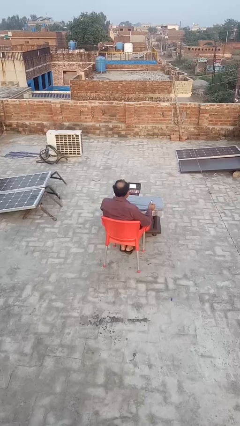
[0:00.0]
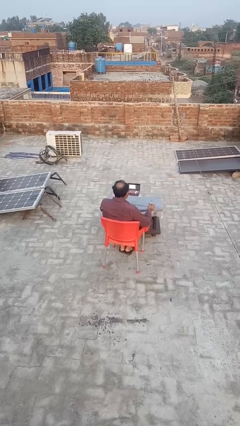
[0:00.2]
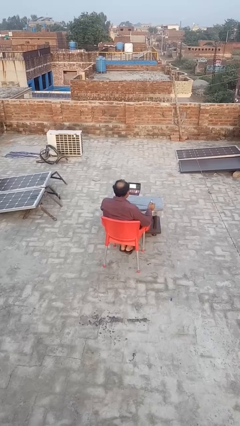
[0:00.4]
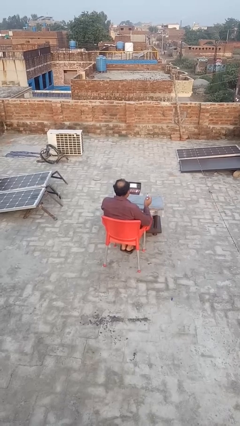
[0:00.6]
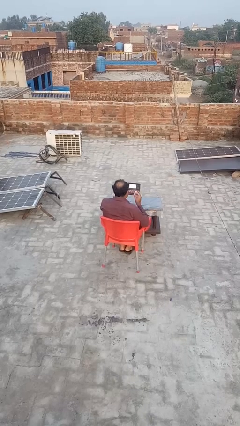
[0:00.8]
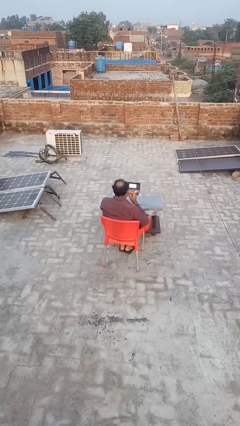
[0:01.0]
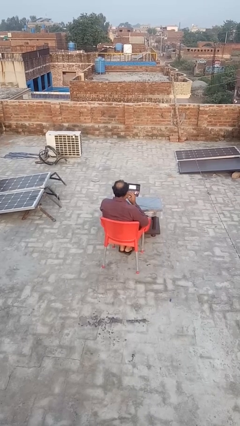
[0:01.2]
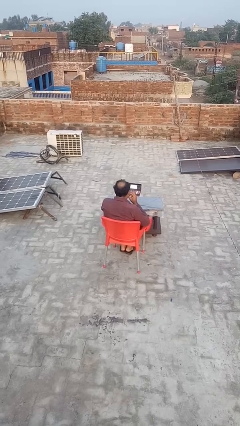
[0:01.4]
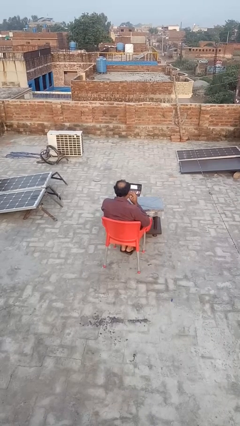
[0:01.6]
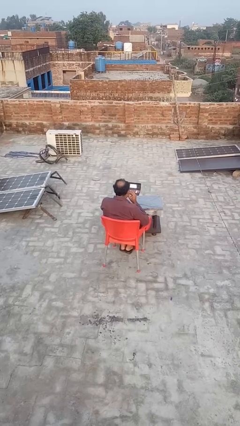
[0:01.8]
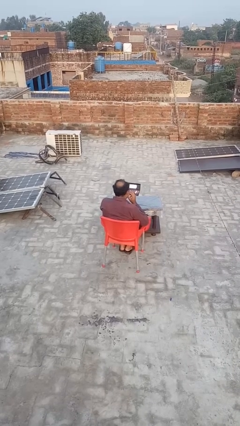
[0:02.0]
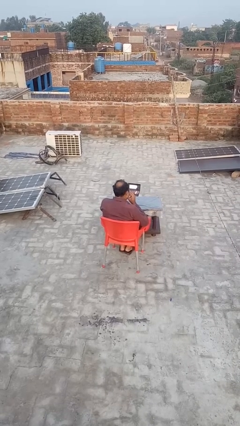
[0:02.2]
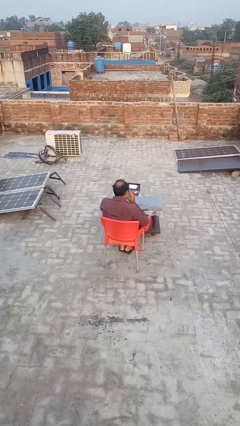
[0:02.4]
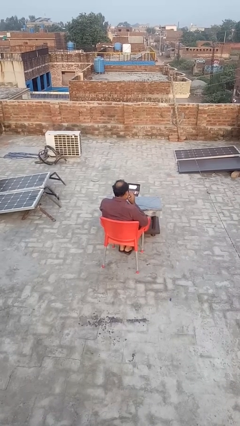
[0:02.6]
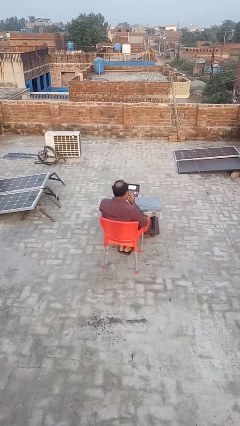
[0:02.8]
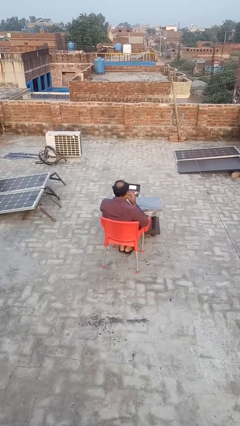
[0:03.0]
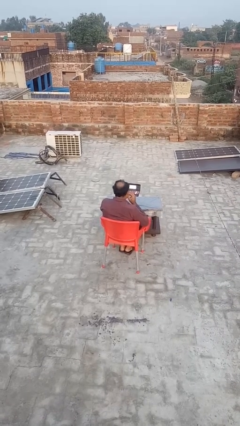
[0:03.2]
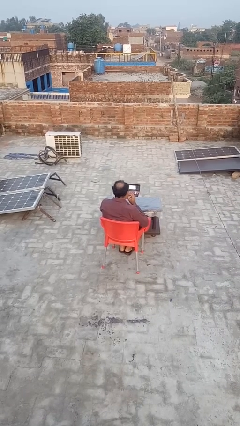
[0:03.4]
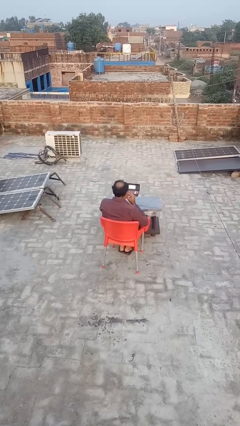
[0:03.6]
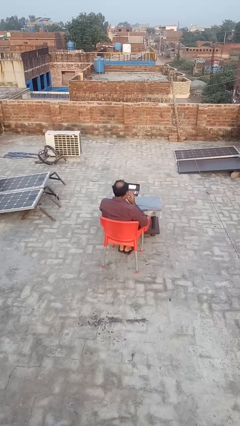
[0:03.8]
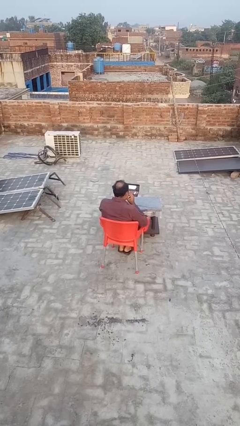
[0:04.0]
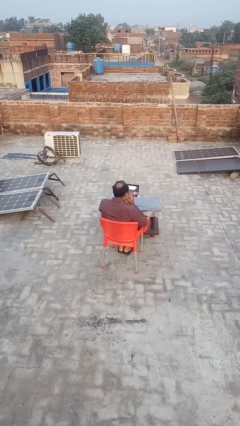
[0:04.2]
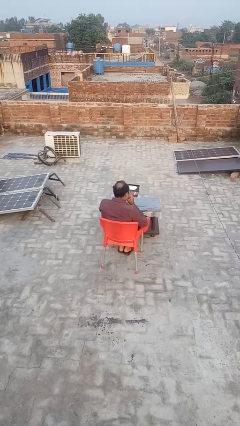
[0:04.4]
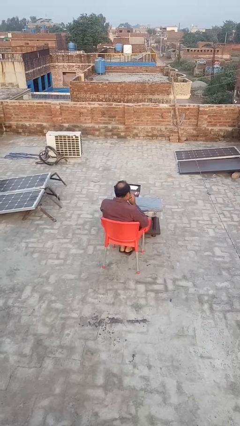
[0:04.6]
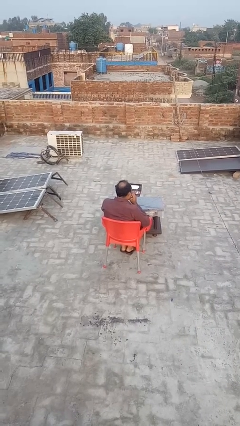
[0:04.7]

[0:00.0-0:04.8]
person applies lip makeup

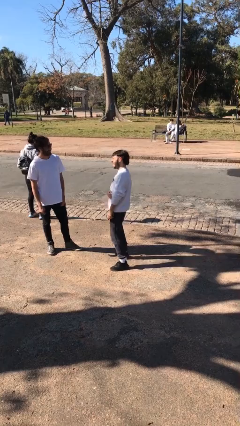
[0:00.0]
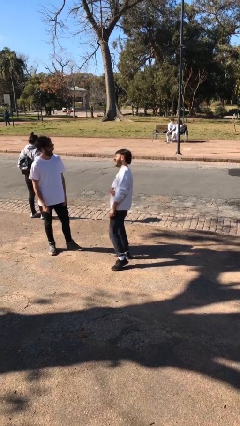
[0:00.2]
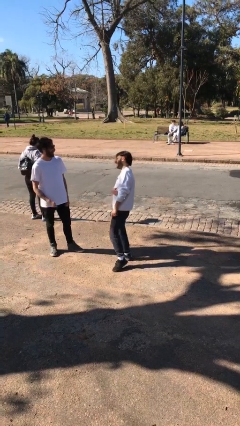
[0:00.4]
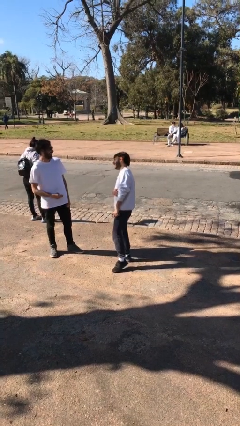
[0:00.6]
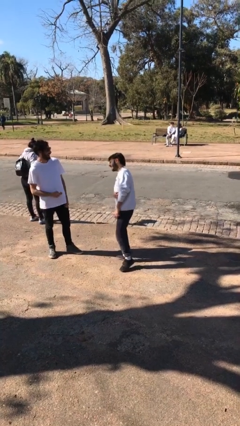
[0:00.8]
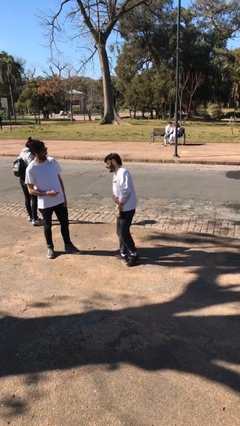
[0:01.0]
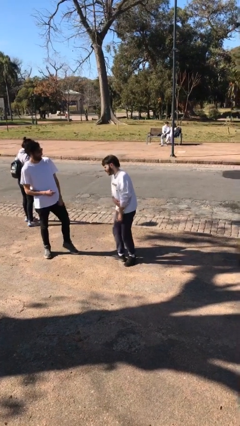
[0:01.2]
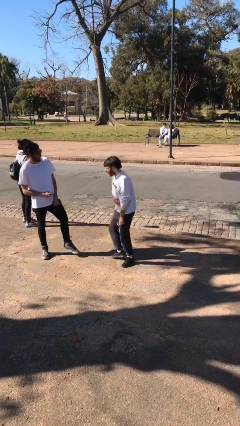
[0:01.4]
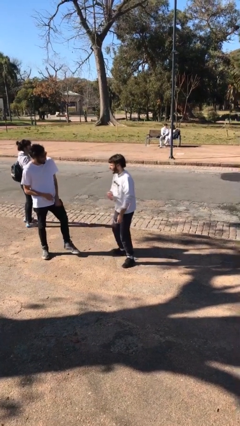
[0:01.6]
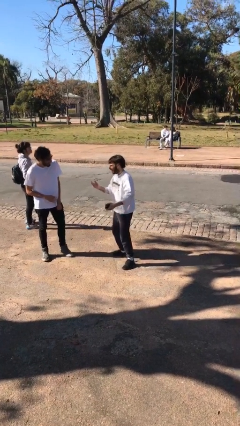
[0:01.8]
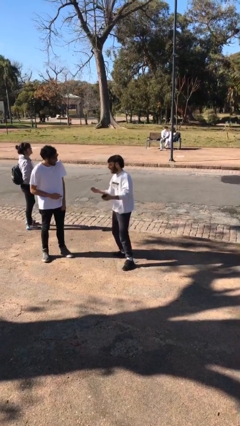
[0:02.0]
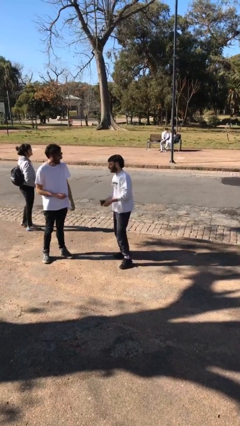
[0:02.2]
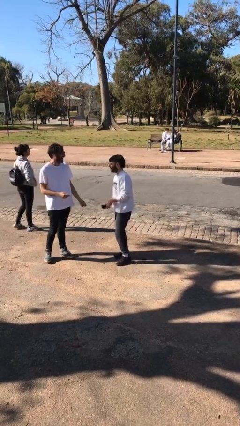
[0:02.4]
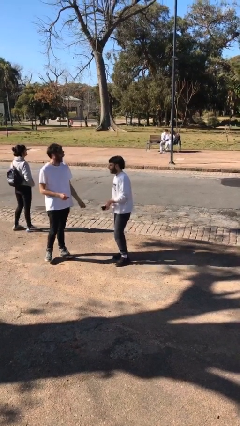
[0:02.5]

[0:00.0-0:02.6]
person laughs with person

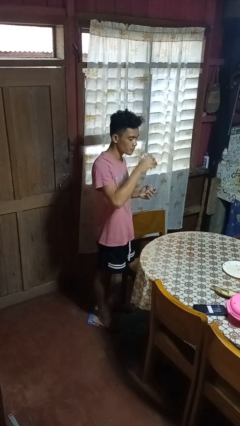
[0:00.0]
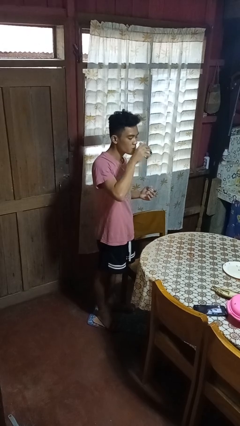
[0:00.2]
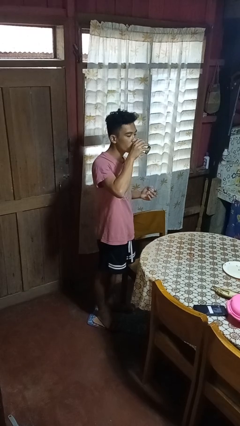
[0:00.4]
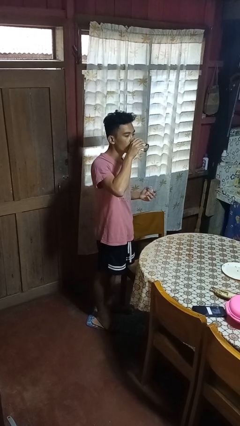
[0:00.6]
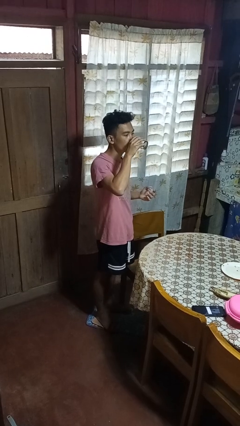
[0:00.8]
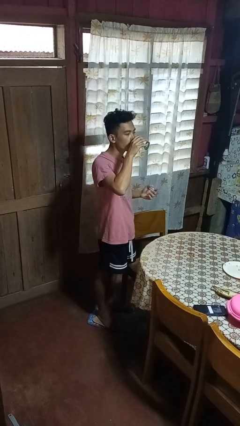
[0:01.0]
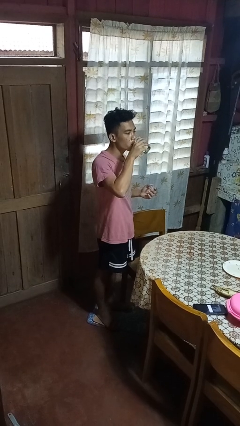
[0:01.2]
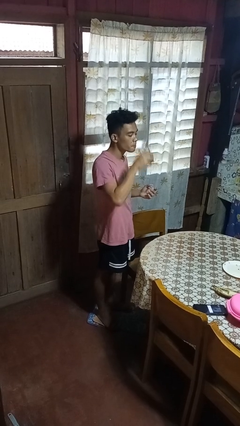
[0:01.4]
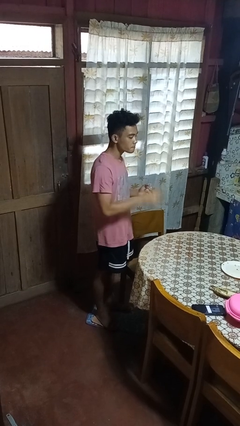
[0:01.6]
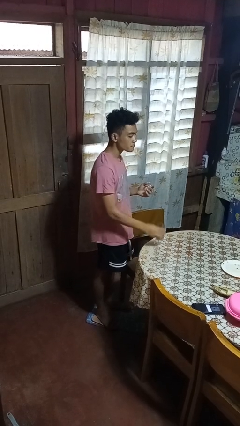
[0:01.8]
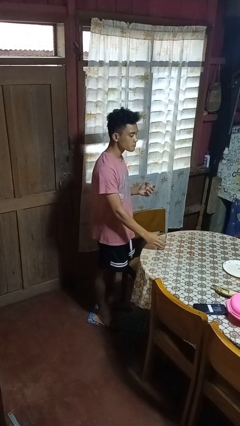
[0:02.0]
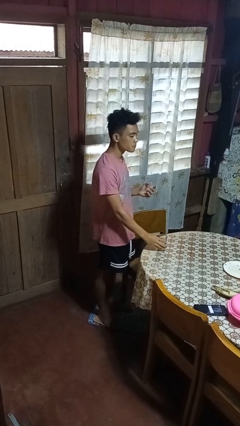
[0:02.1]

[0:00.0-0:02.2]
person drinks from cup

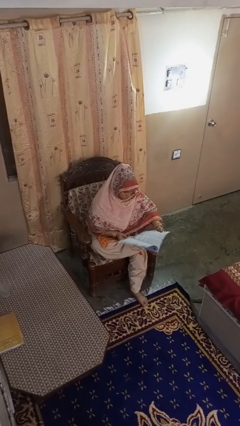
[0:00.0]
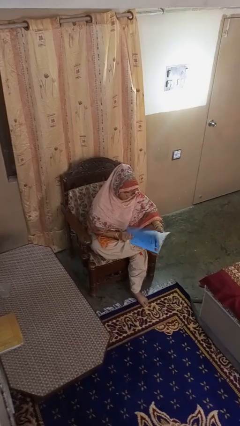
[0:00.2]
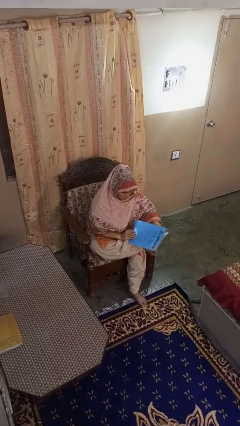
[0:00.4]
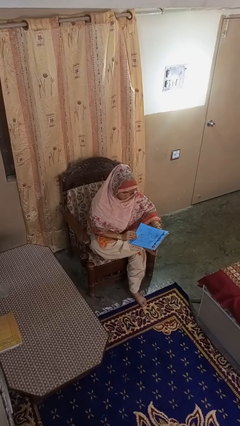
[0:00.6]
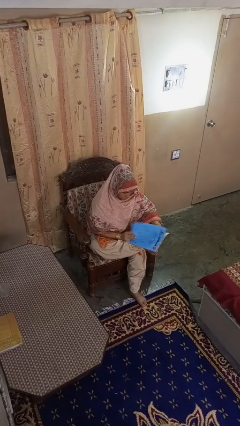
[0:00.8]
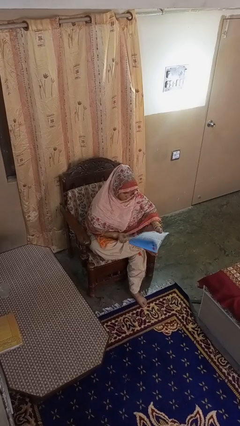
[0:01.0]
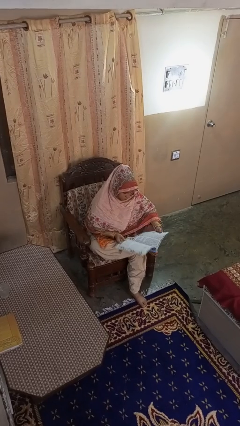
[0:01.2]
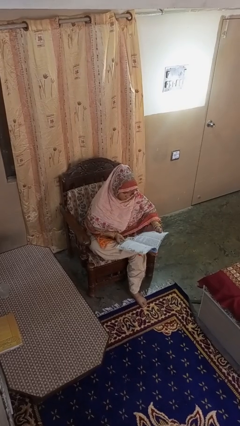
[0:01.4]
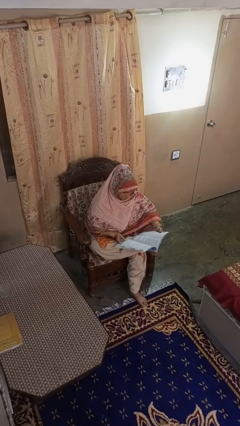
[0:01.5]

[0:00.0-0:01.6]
person reads magazine

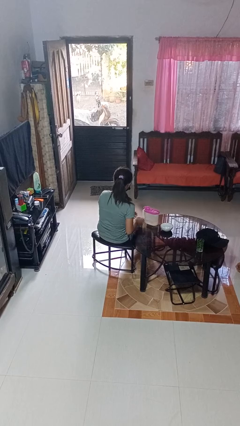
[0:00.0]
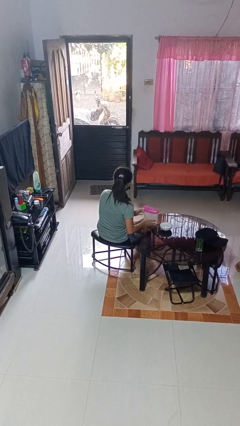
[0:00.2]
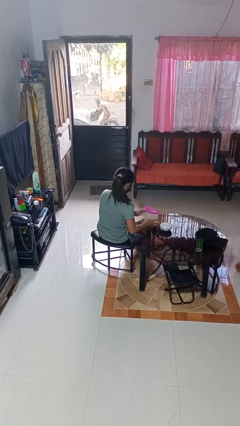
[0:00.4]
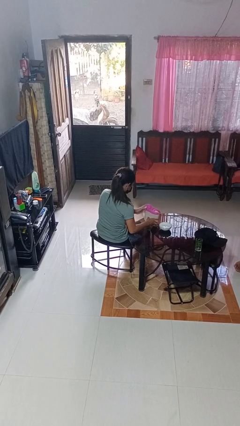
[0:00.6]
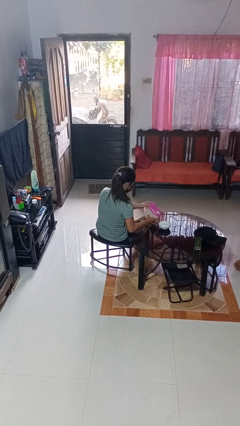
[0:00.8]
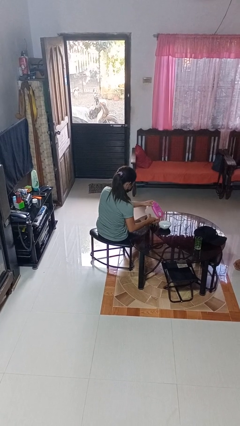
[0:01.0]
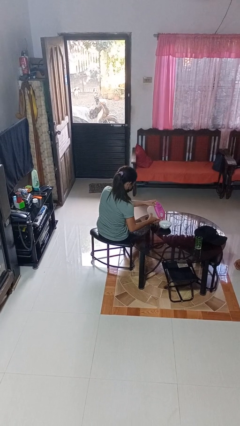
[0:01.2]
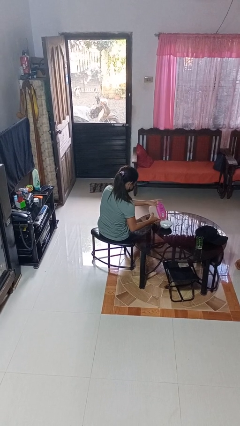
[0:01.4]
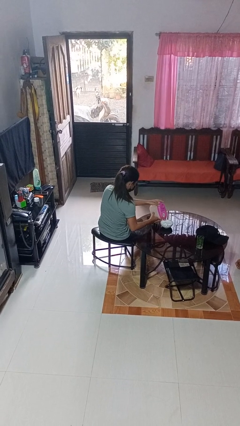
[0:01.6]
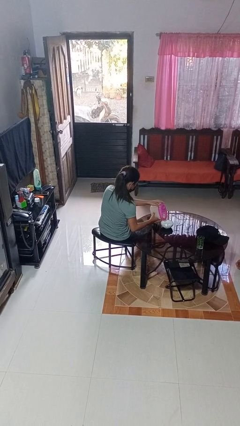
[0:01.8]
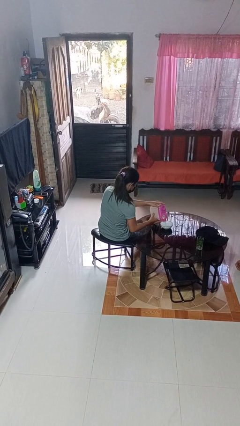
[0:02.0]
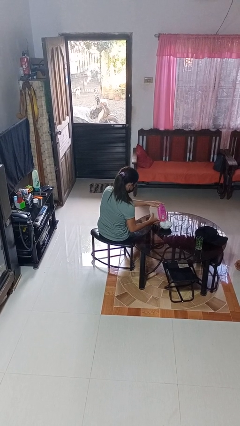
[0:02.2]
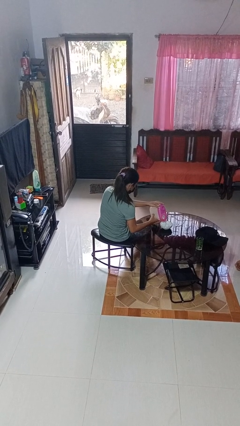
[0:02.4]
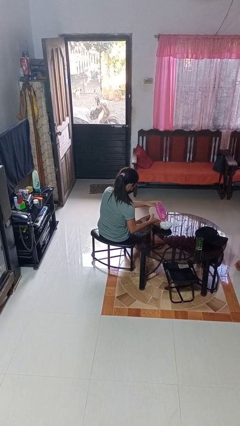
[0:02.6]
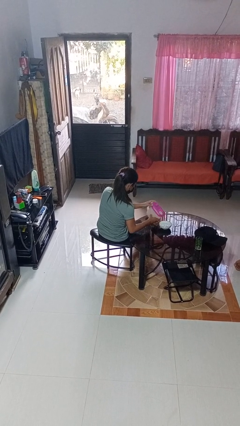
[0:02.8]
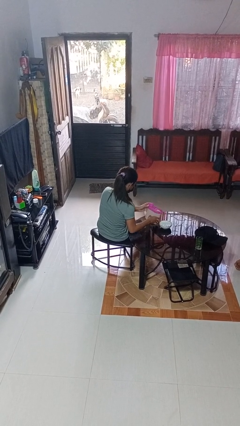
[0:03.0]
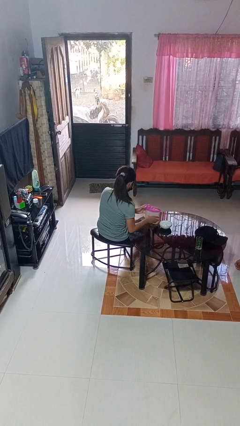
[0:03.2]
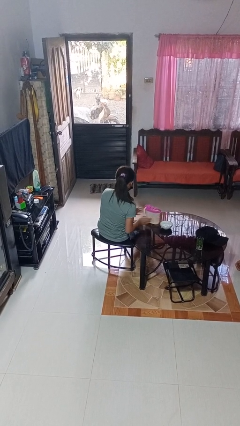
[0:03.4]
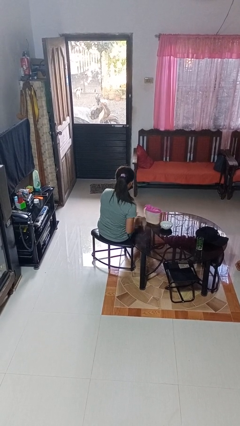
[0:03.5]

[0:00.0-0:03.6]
person pours into bowl

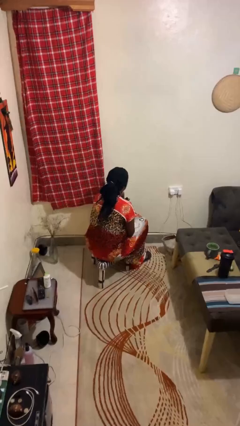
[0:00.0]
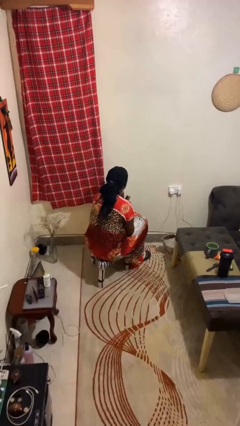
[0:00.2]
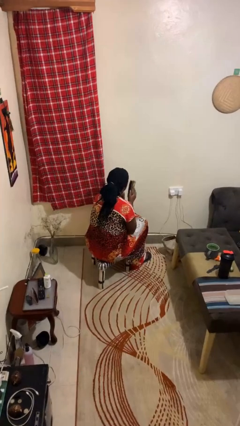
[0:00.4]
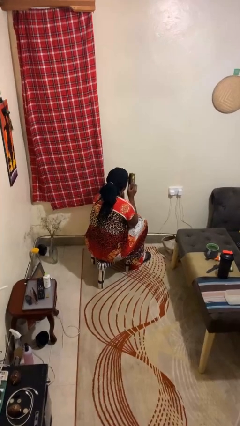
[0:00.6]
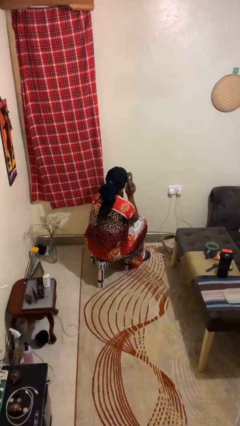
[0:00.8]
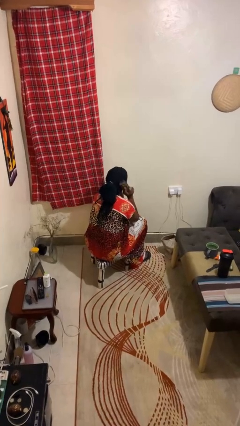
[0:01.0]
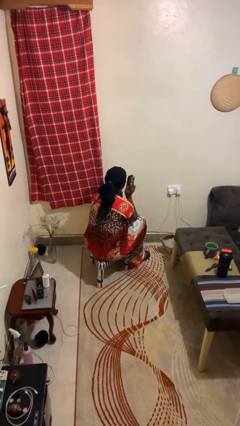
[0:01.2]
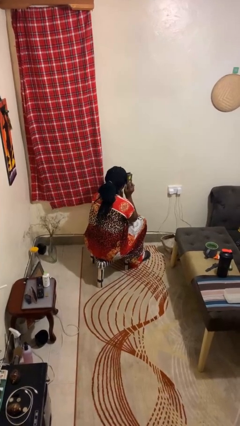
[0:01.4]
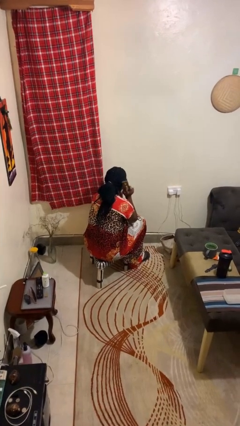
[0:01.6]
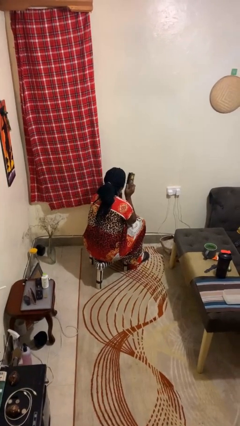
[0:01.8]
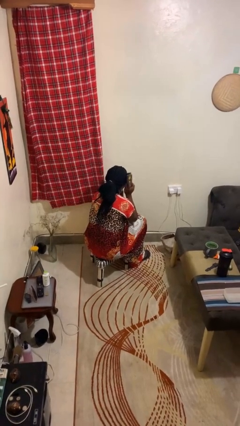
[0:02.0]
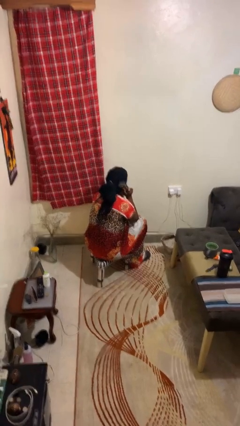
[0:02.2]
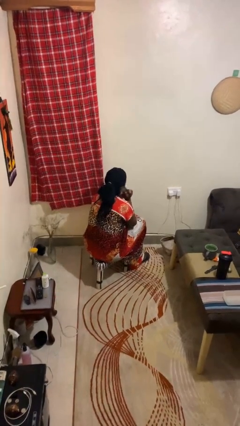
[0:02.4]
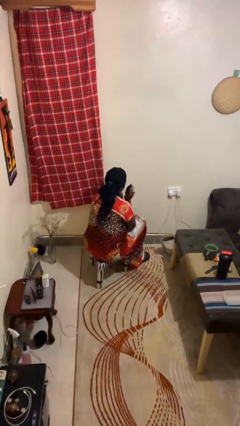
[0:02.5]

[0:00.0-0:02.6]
person brushes hair
